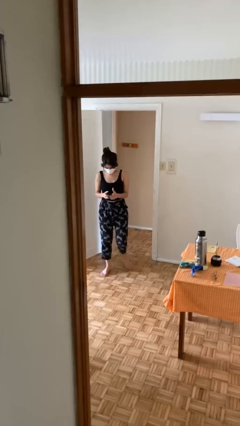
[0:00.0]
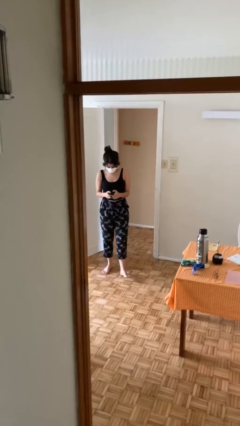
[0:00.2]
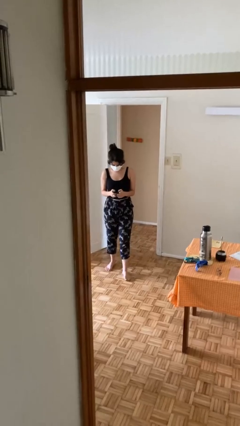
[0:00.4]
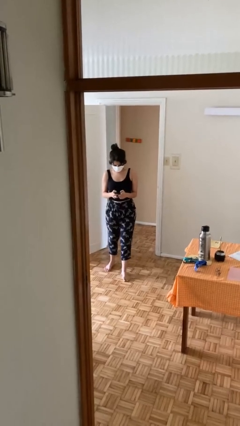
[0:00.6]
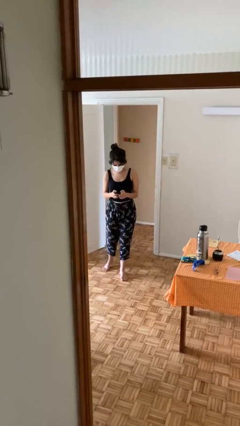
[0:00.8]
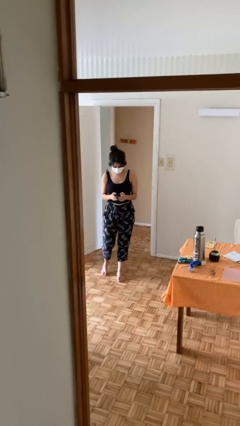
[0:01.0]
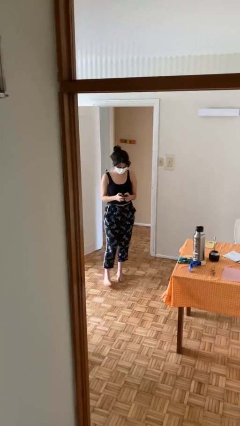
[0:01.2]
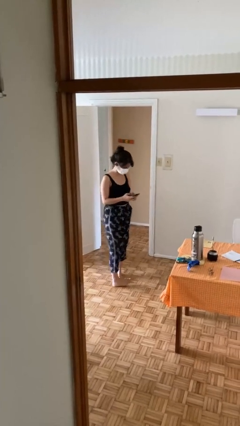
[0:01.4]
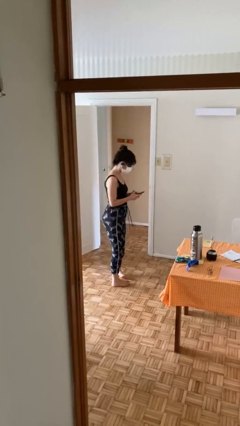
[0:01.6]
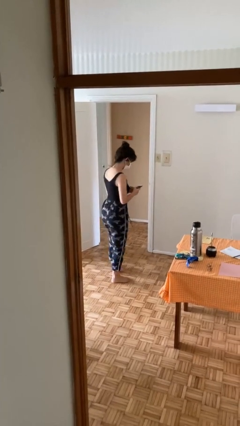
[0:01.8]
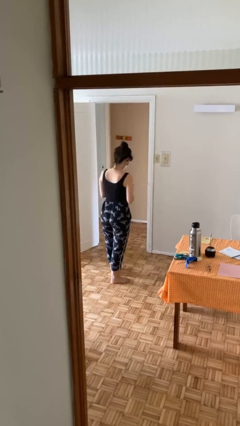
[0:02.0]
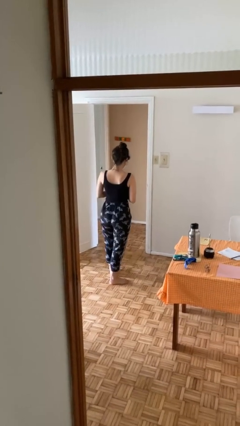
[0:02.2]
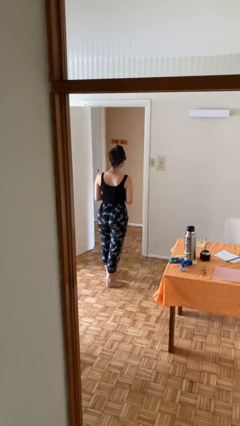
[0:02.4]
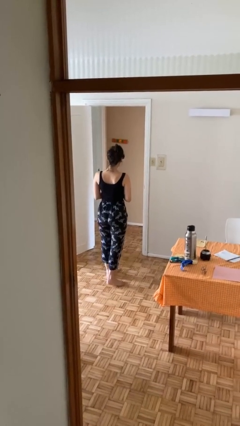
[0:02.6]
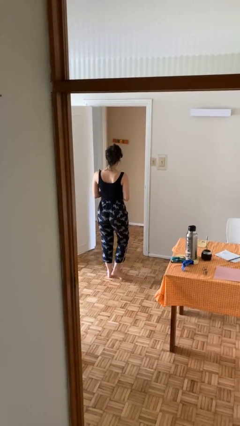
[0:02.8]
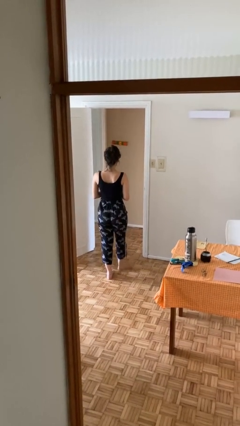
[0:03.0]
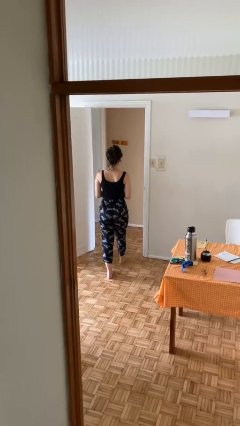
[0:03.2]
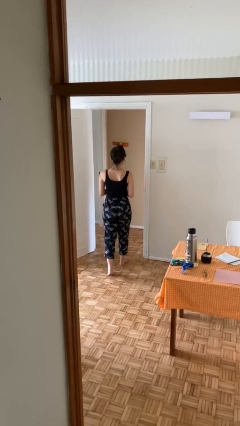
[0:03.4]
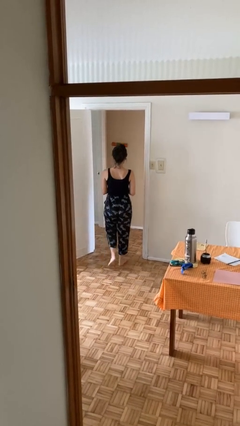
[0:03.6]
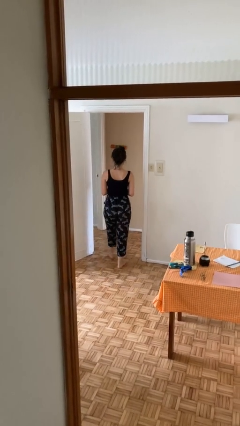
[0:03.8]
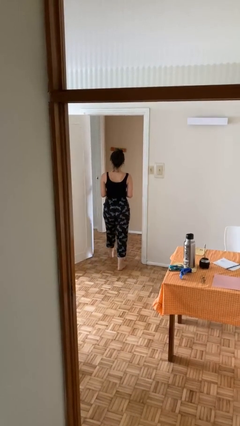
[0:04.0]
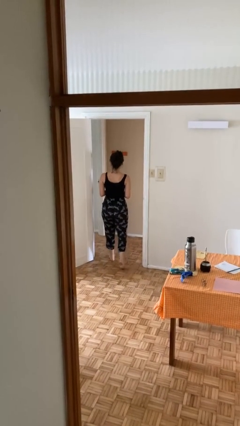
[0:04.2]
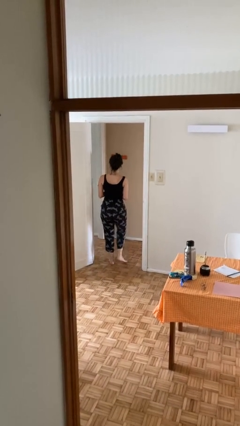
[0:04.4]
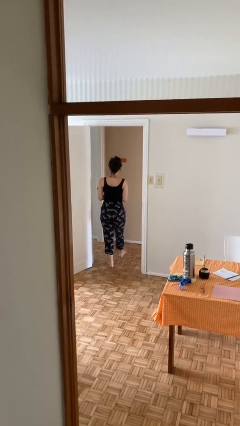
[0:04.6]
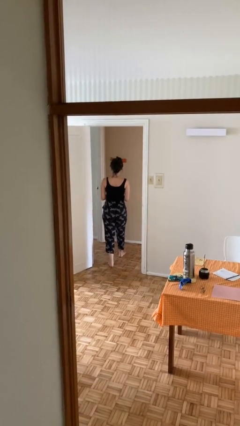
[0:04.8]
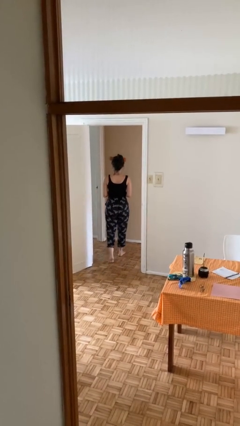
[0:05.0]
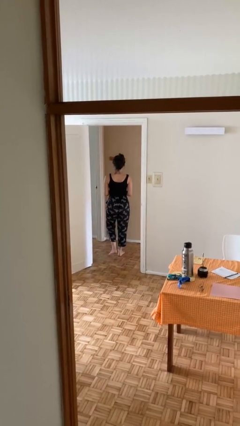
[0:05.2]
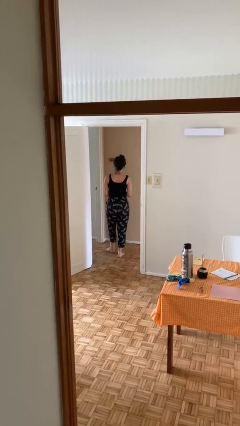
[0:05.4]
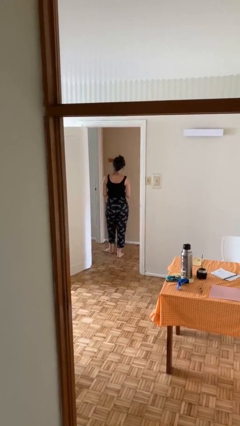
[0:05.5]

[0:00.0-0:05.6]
person exits scene through structure

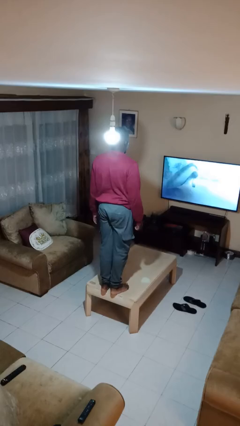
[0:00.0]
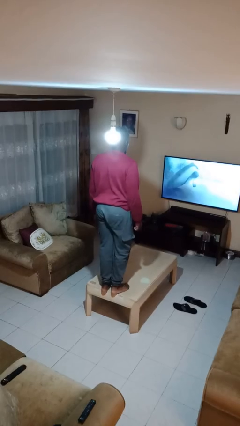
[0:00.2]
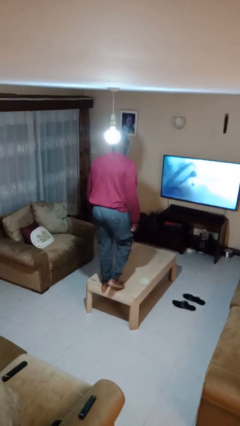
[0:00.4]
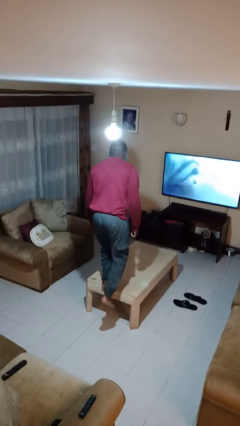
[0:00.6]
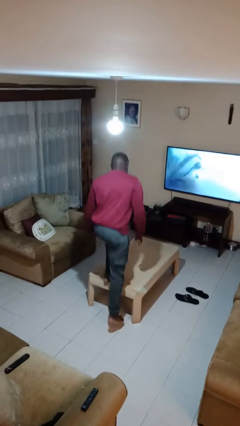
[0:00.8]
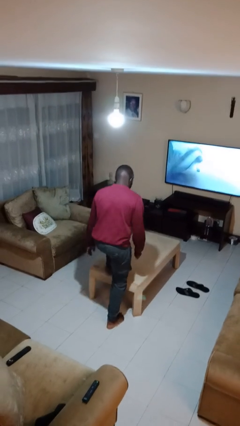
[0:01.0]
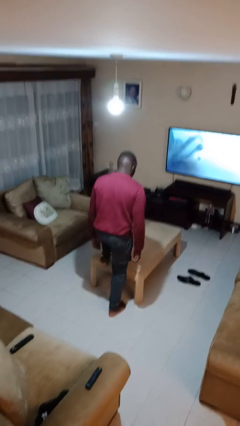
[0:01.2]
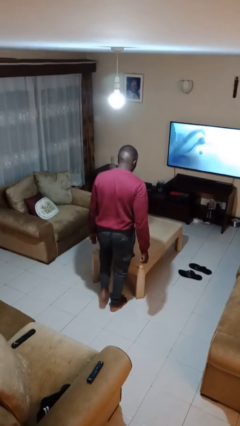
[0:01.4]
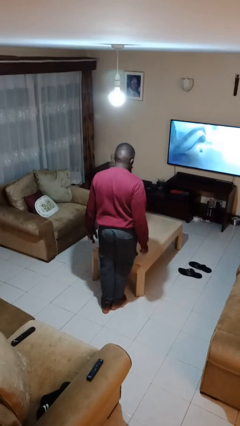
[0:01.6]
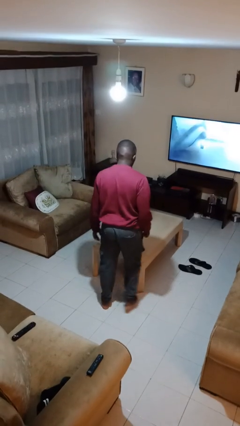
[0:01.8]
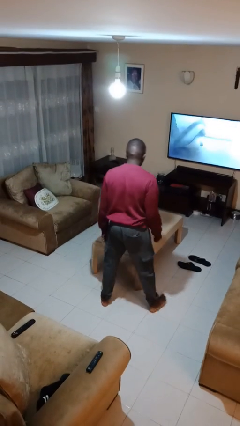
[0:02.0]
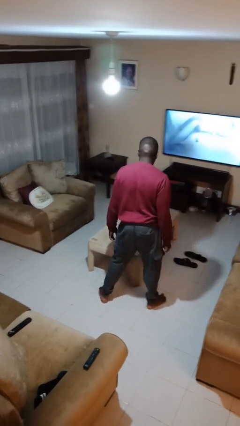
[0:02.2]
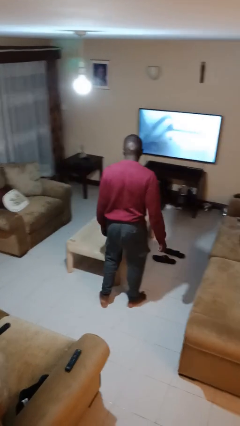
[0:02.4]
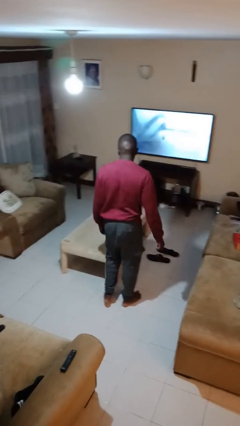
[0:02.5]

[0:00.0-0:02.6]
person climbs off table

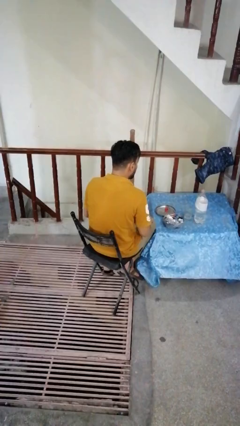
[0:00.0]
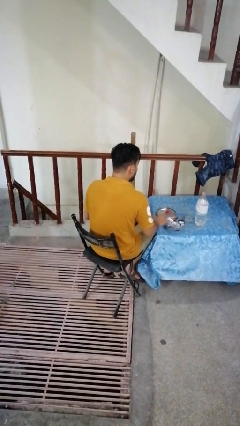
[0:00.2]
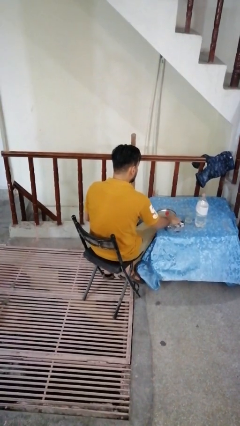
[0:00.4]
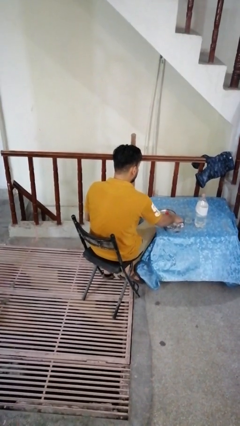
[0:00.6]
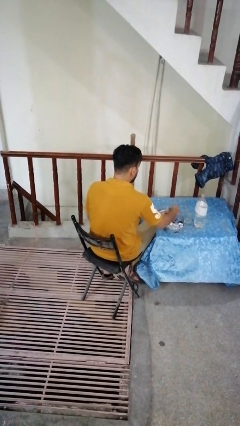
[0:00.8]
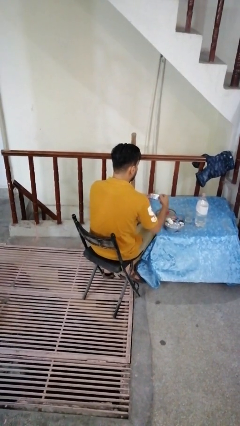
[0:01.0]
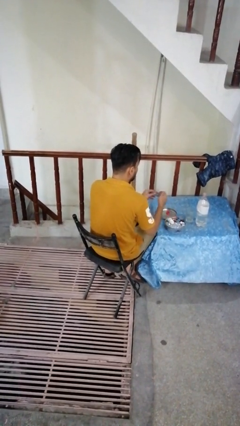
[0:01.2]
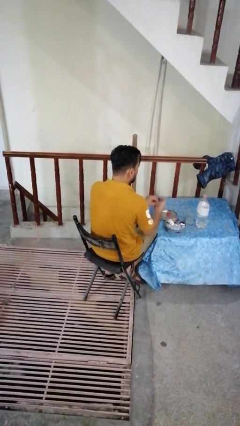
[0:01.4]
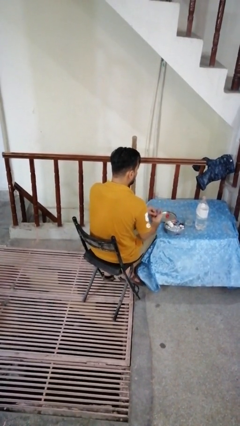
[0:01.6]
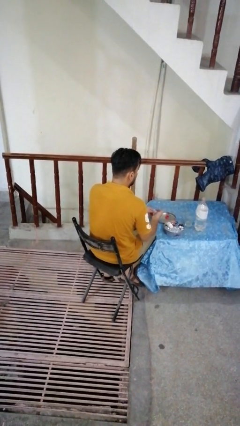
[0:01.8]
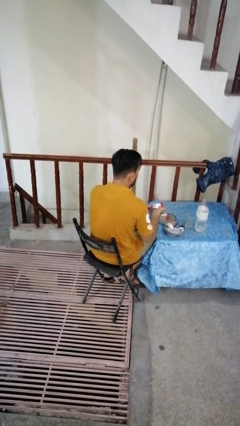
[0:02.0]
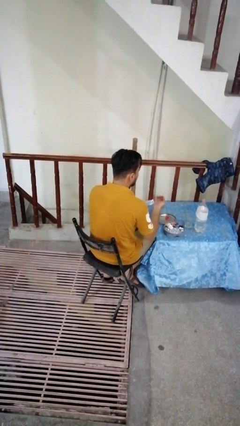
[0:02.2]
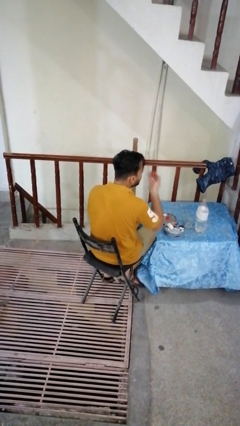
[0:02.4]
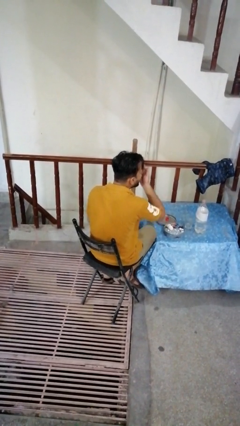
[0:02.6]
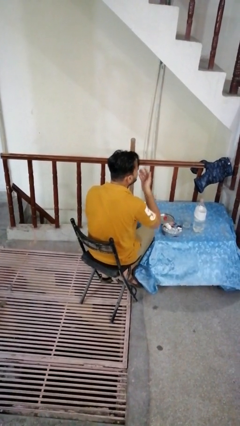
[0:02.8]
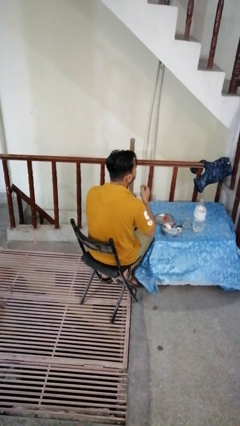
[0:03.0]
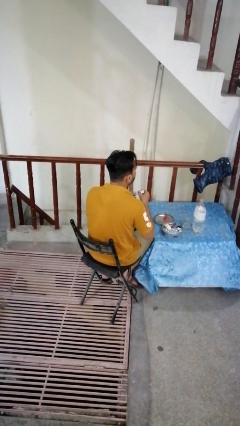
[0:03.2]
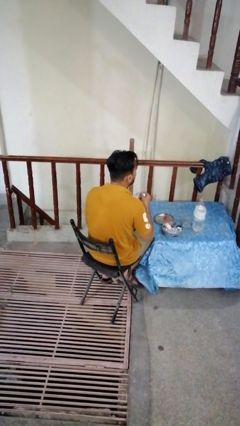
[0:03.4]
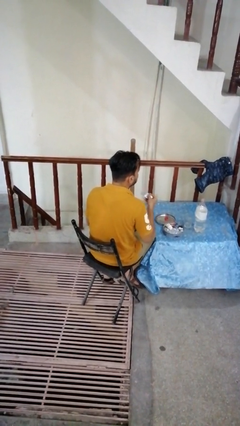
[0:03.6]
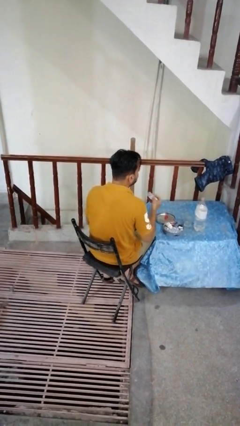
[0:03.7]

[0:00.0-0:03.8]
person takes medicine pills

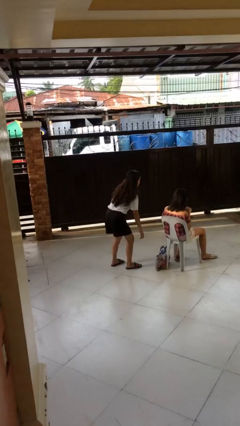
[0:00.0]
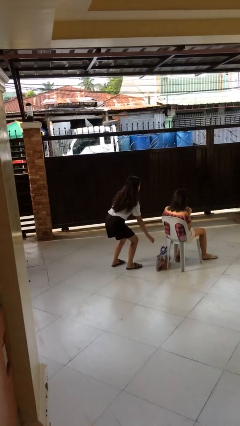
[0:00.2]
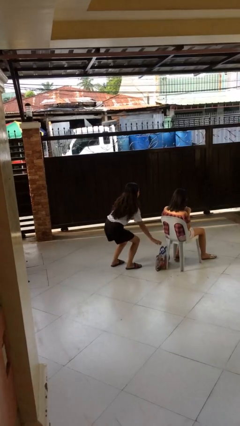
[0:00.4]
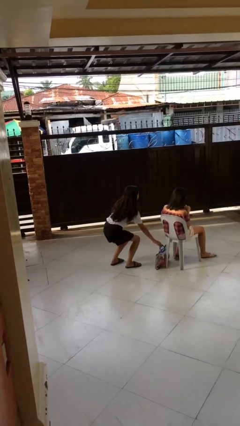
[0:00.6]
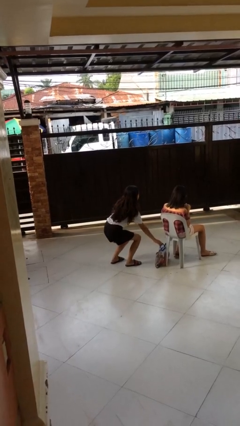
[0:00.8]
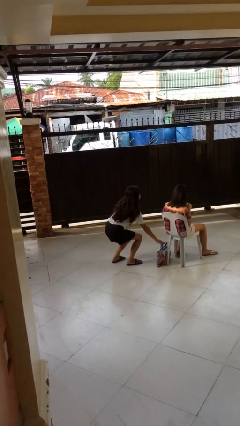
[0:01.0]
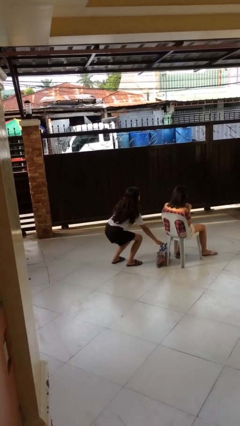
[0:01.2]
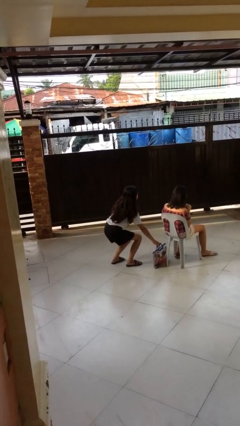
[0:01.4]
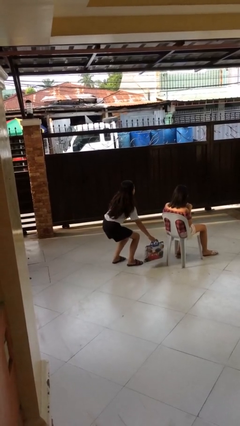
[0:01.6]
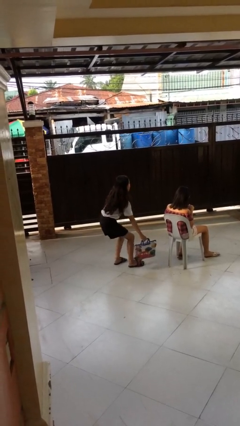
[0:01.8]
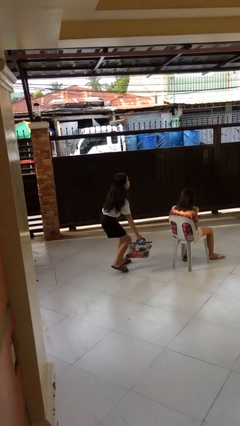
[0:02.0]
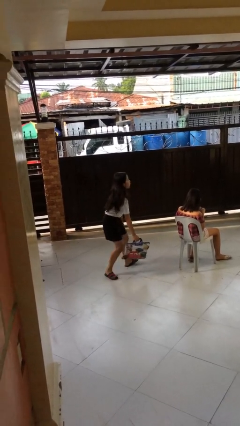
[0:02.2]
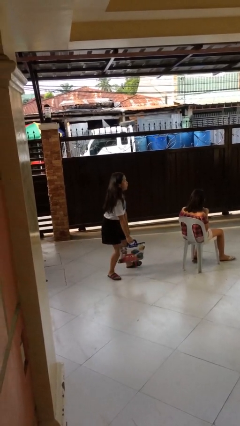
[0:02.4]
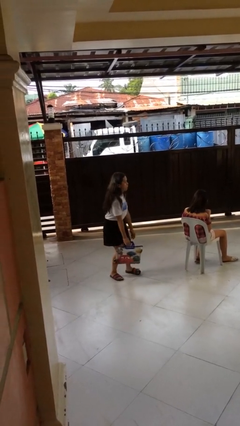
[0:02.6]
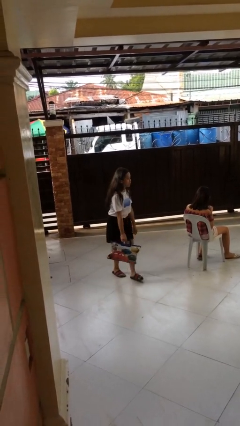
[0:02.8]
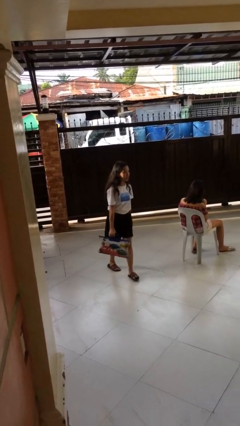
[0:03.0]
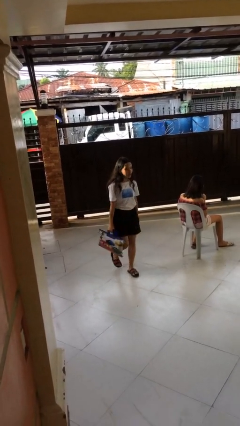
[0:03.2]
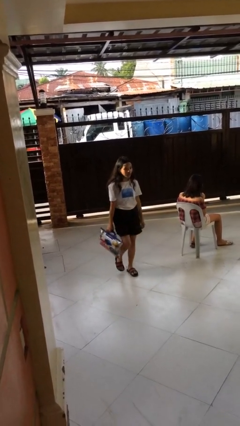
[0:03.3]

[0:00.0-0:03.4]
person steals object from person

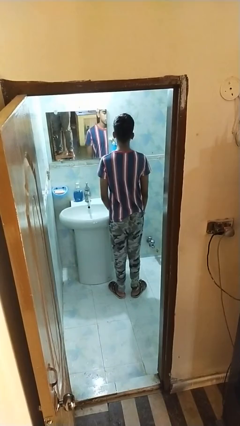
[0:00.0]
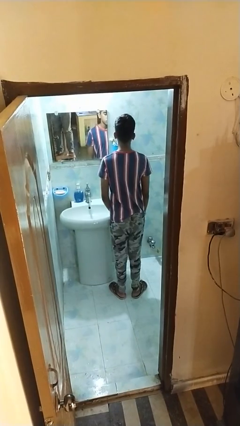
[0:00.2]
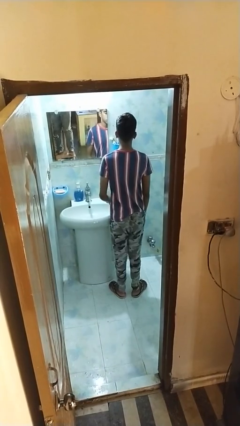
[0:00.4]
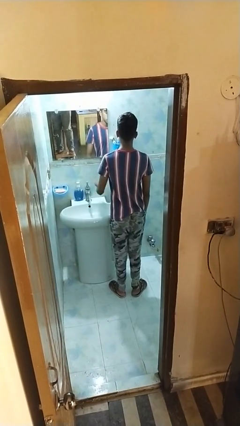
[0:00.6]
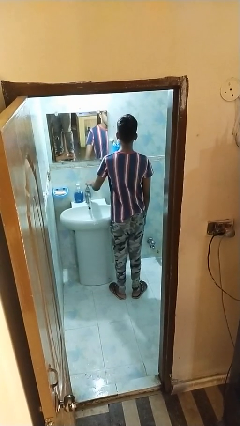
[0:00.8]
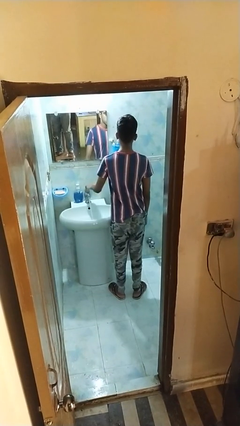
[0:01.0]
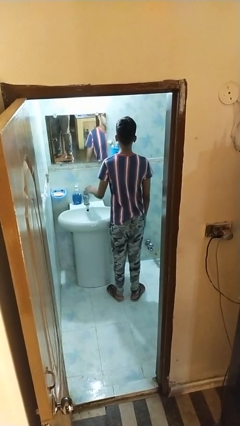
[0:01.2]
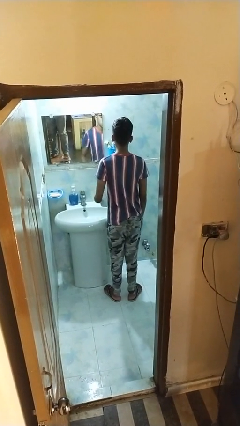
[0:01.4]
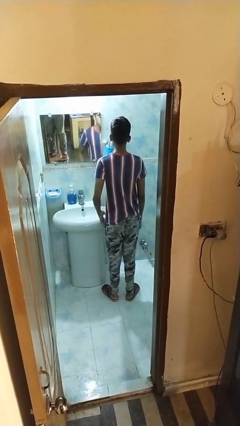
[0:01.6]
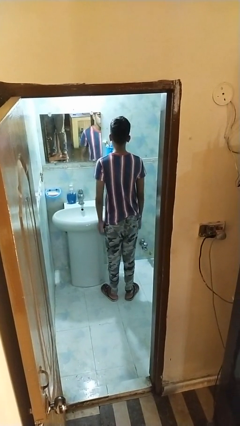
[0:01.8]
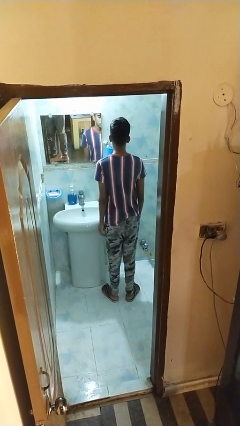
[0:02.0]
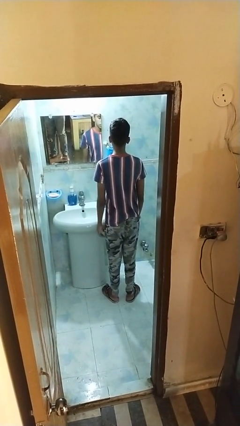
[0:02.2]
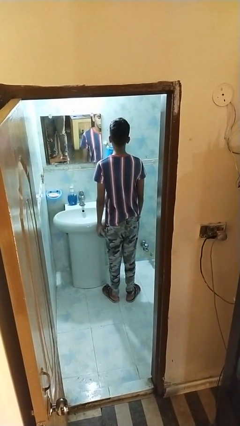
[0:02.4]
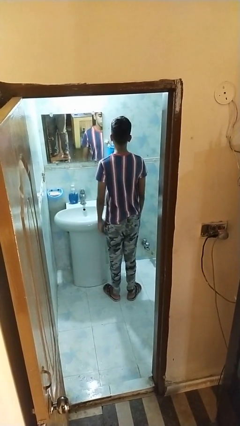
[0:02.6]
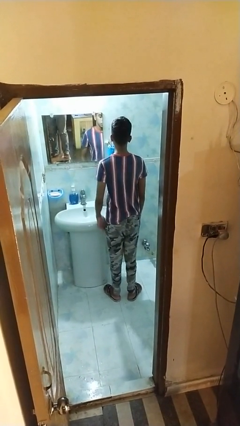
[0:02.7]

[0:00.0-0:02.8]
person turns off faucet
